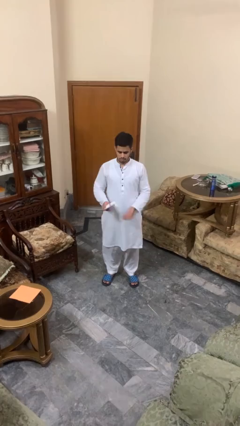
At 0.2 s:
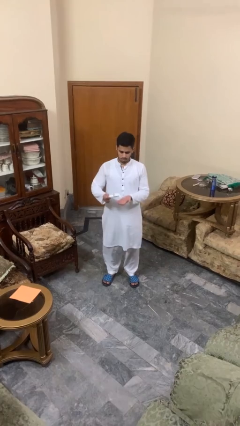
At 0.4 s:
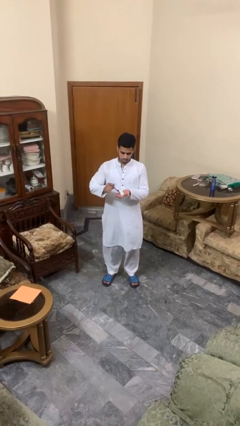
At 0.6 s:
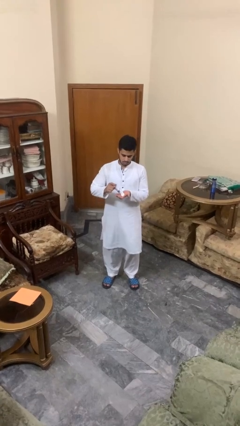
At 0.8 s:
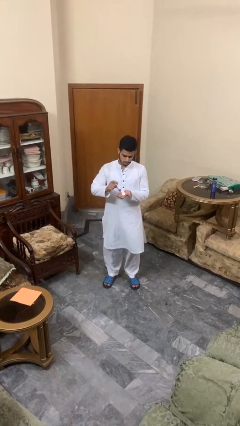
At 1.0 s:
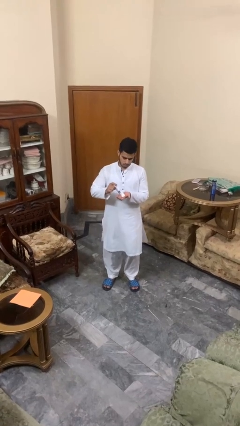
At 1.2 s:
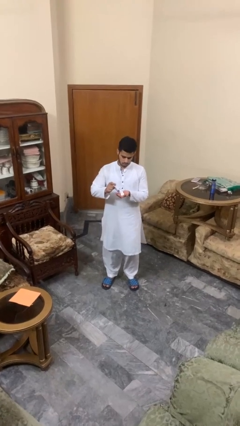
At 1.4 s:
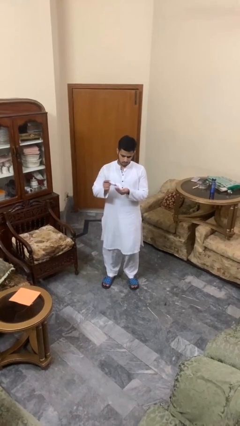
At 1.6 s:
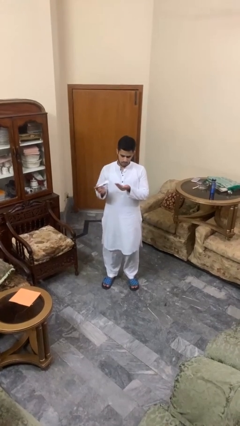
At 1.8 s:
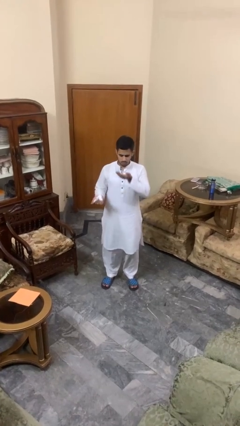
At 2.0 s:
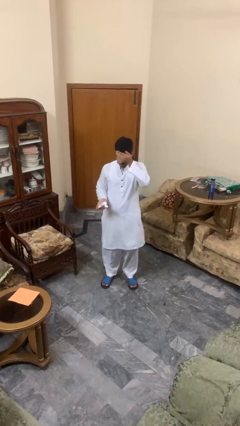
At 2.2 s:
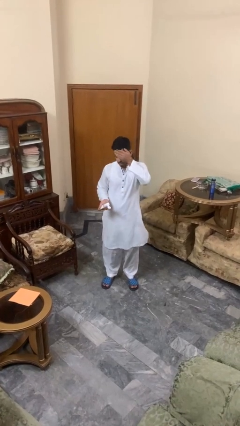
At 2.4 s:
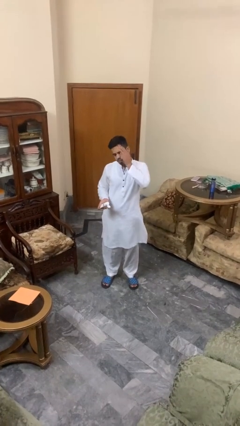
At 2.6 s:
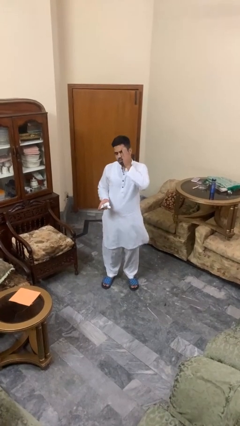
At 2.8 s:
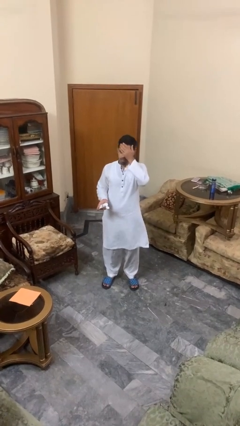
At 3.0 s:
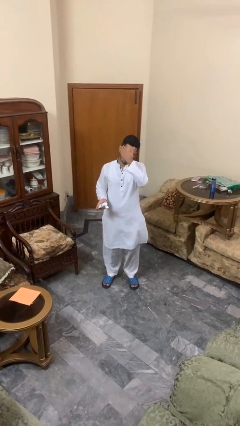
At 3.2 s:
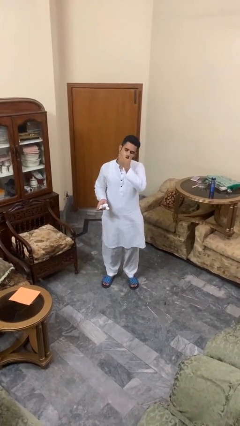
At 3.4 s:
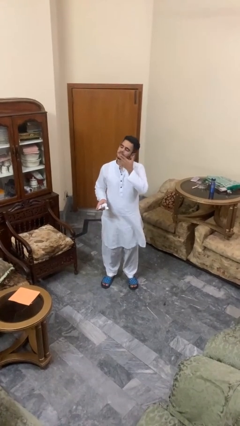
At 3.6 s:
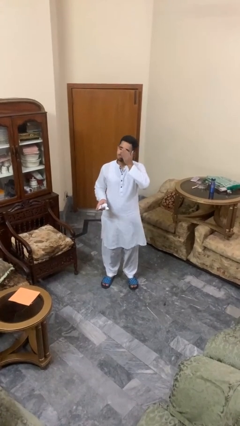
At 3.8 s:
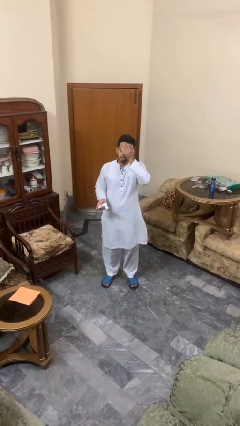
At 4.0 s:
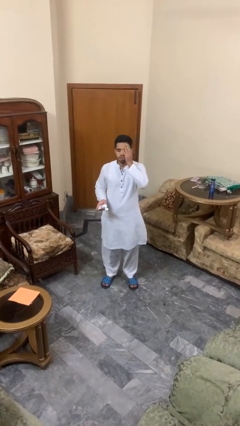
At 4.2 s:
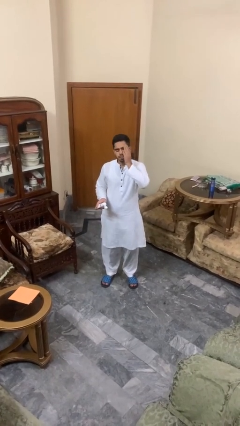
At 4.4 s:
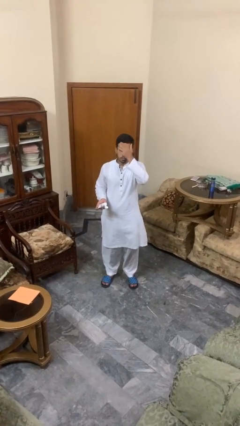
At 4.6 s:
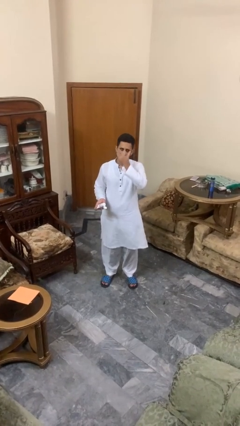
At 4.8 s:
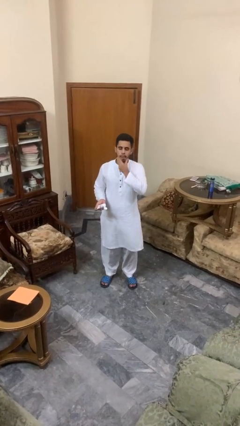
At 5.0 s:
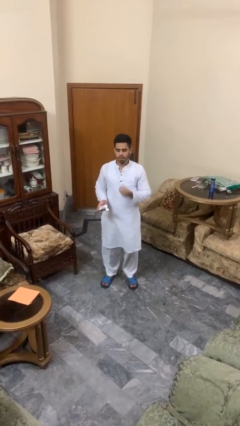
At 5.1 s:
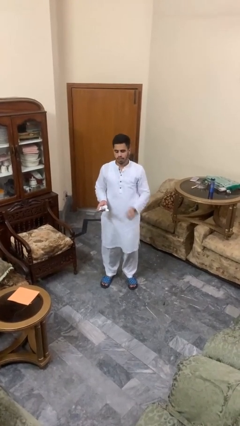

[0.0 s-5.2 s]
person applies facial moisturizer

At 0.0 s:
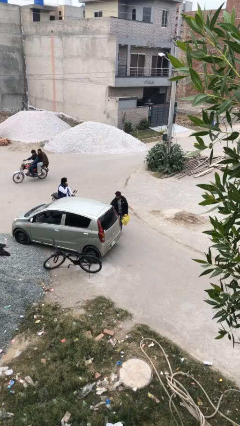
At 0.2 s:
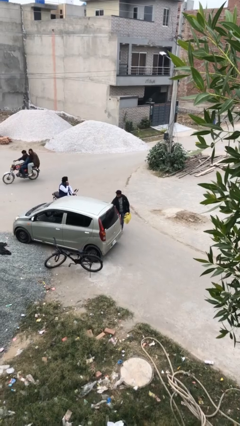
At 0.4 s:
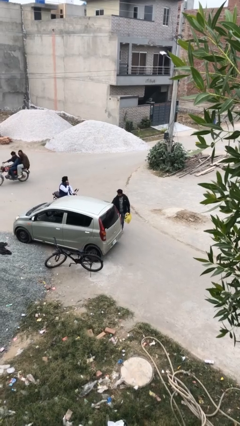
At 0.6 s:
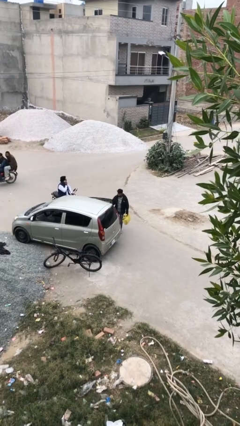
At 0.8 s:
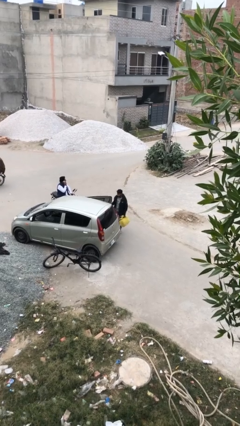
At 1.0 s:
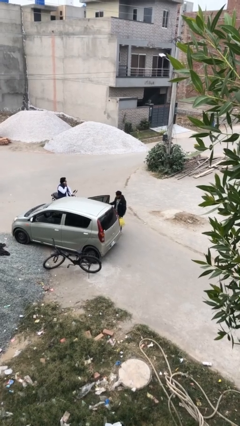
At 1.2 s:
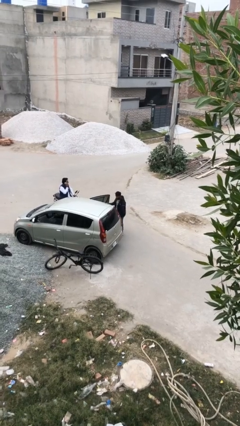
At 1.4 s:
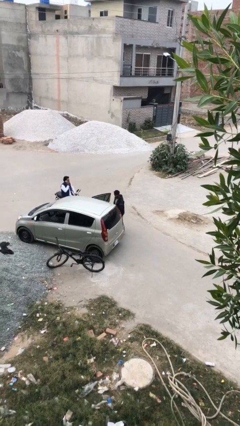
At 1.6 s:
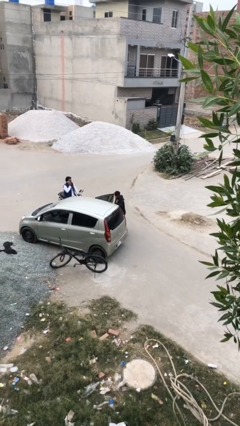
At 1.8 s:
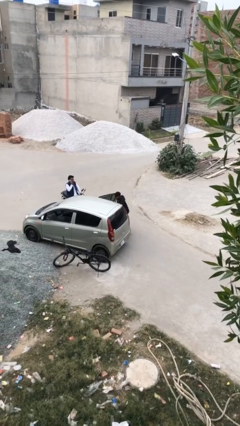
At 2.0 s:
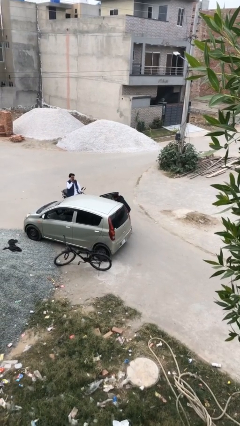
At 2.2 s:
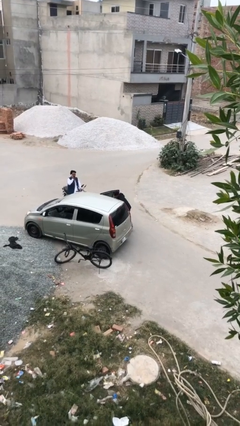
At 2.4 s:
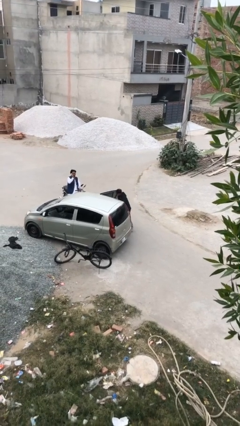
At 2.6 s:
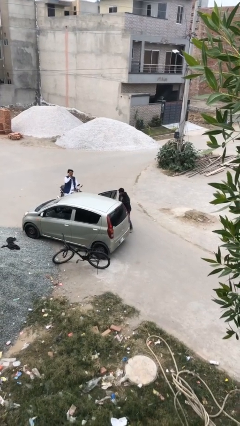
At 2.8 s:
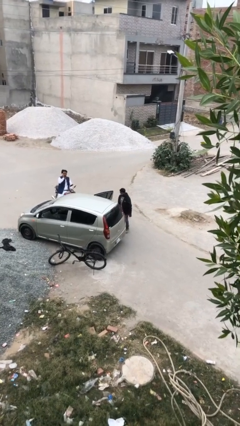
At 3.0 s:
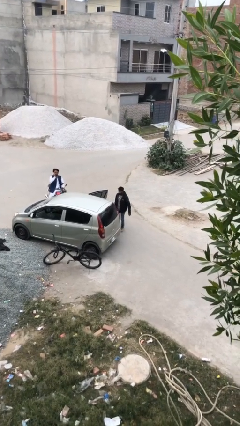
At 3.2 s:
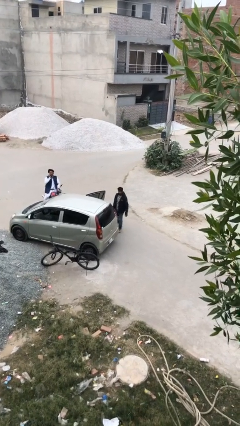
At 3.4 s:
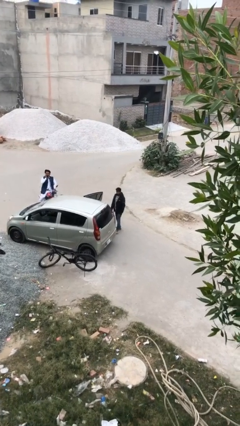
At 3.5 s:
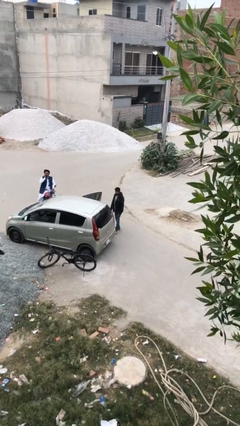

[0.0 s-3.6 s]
person loads car

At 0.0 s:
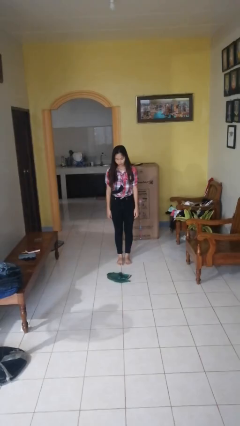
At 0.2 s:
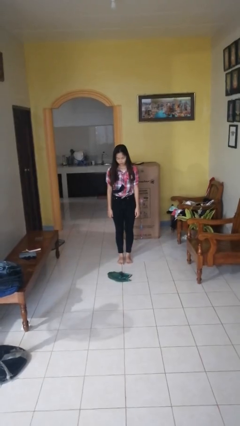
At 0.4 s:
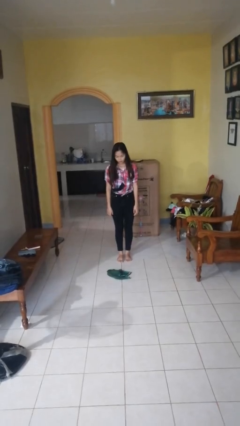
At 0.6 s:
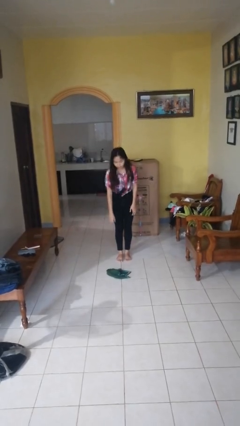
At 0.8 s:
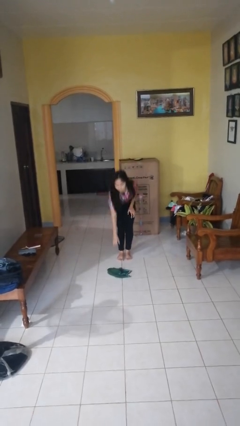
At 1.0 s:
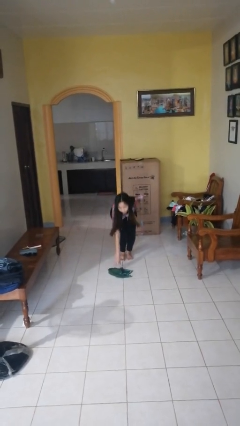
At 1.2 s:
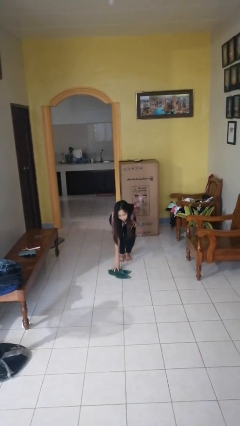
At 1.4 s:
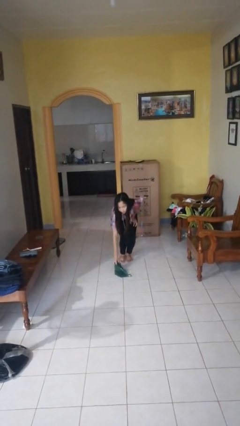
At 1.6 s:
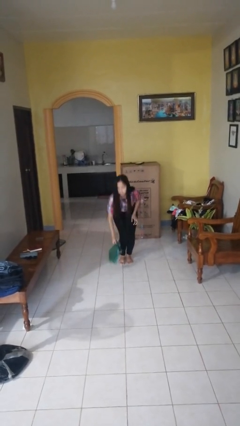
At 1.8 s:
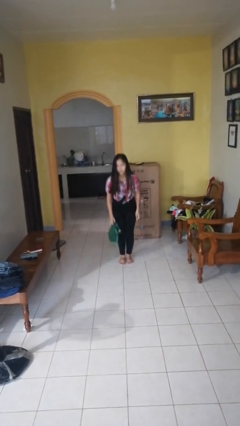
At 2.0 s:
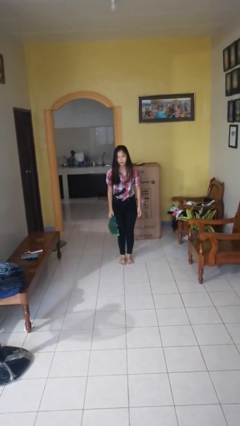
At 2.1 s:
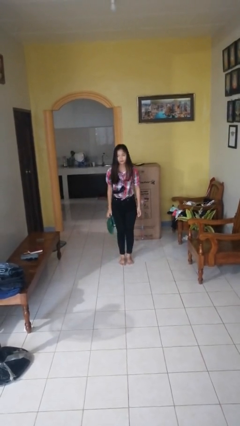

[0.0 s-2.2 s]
person picks up object from floor

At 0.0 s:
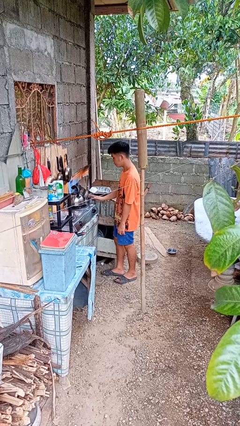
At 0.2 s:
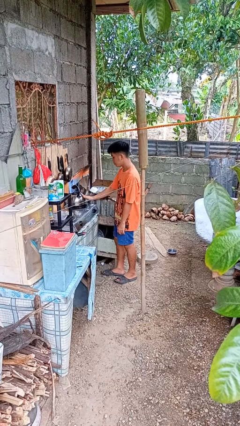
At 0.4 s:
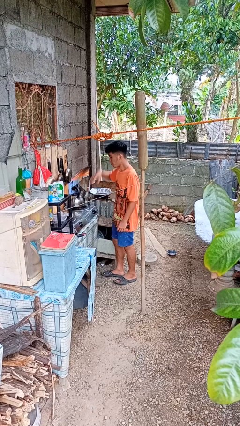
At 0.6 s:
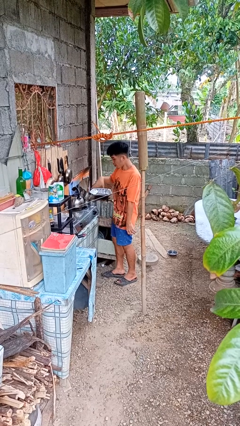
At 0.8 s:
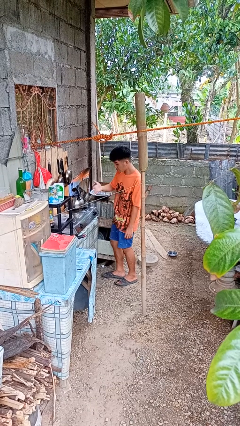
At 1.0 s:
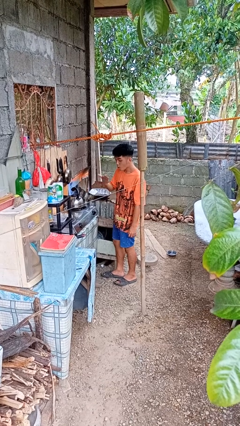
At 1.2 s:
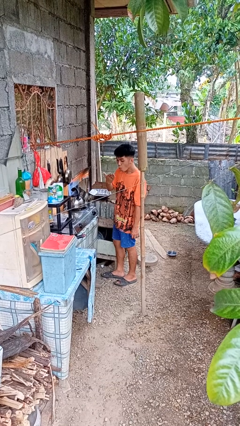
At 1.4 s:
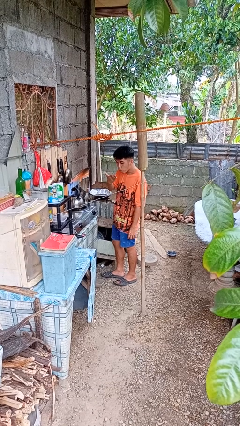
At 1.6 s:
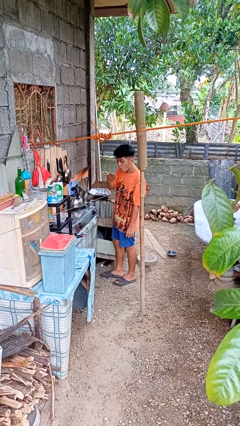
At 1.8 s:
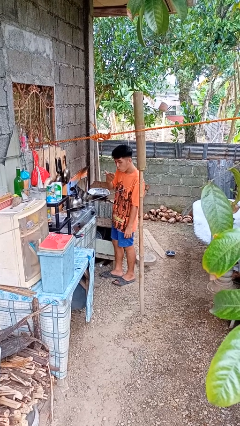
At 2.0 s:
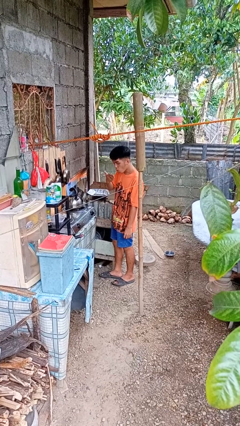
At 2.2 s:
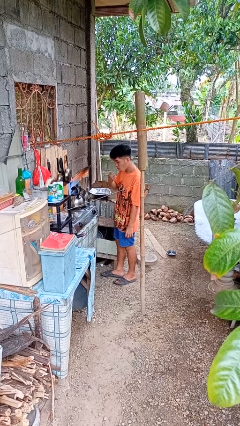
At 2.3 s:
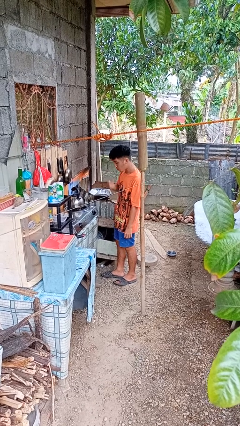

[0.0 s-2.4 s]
person burns hand

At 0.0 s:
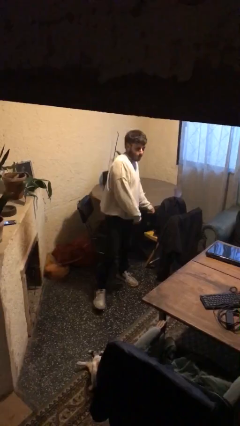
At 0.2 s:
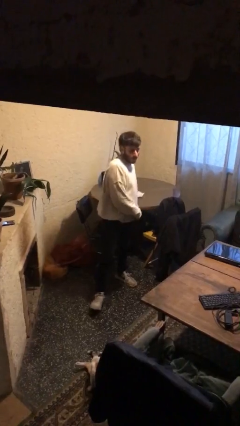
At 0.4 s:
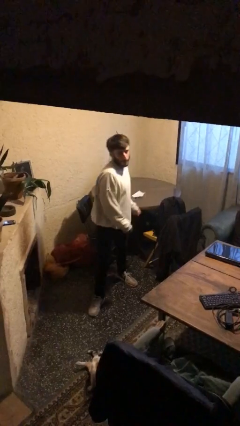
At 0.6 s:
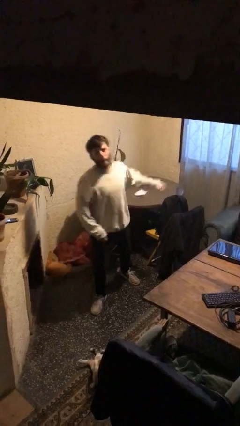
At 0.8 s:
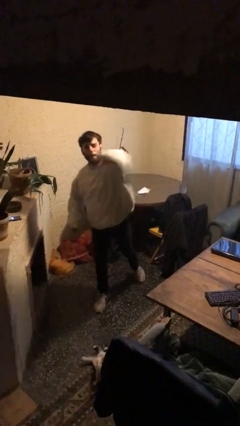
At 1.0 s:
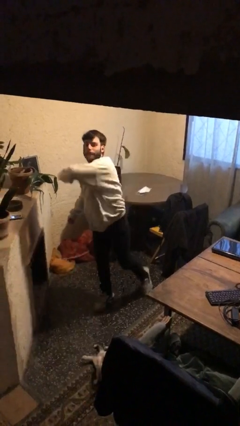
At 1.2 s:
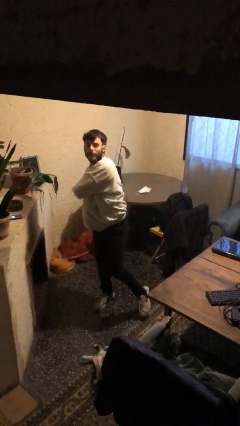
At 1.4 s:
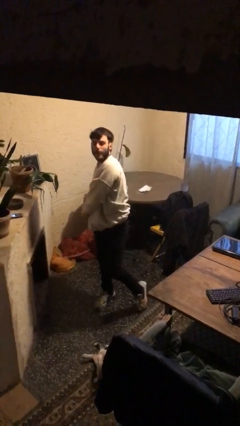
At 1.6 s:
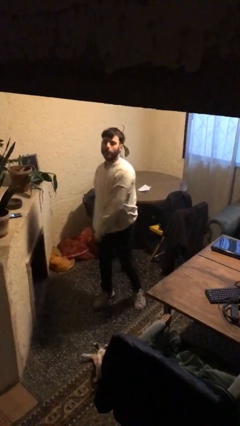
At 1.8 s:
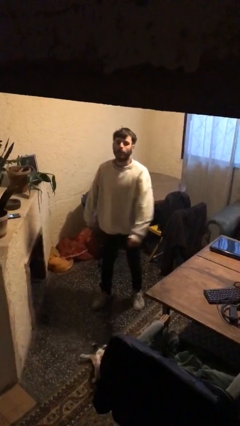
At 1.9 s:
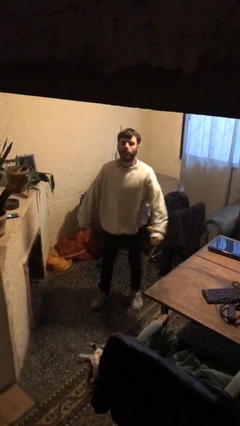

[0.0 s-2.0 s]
person punches

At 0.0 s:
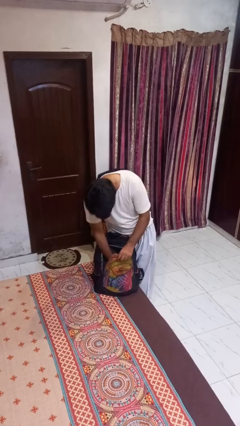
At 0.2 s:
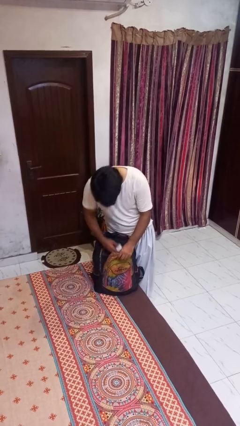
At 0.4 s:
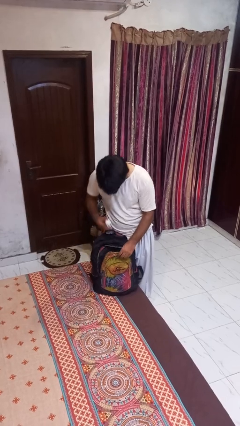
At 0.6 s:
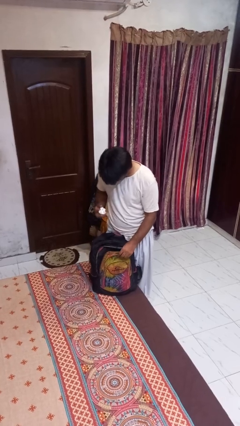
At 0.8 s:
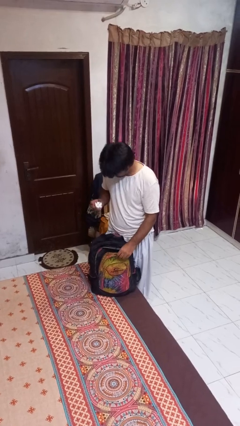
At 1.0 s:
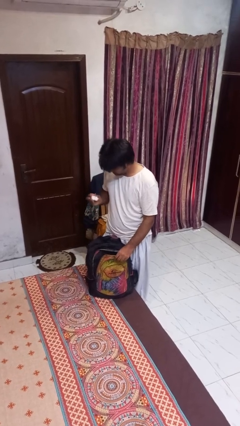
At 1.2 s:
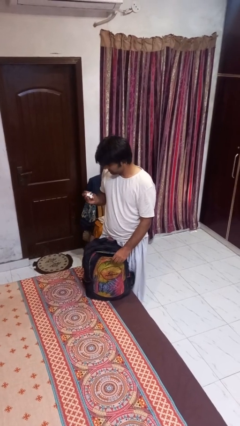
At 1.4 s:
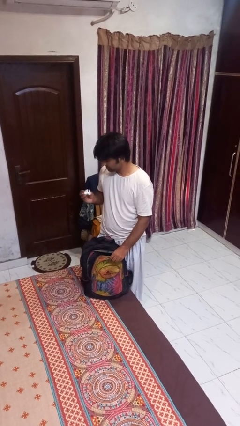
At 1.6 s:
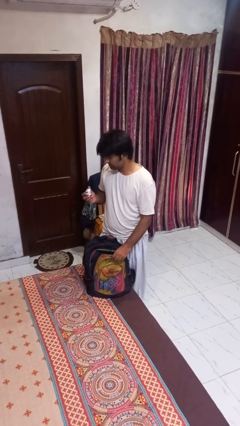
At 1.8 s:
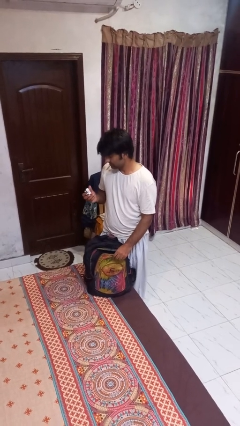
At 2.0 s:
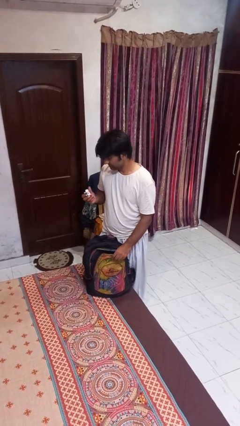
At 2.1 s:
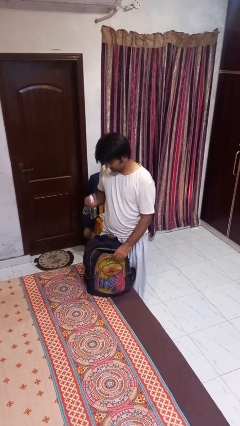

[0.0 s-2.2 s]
person takes object from backpack
